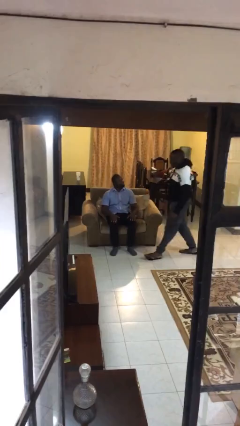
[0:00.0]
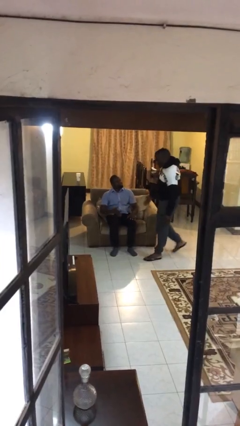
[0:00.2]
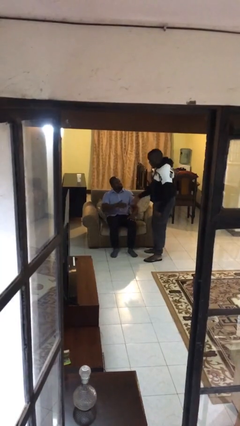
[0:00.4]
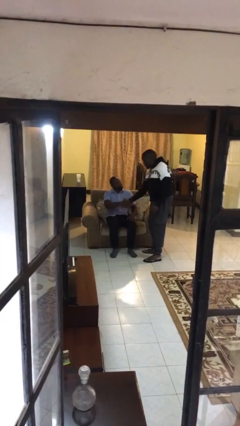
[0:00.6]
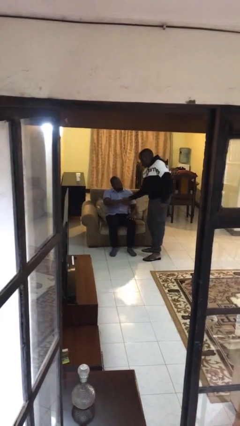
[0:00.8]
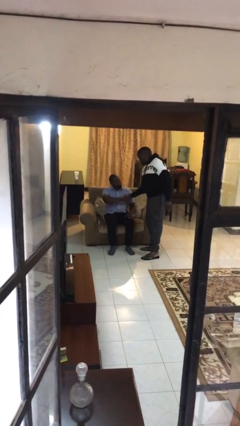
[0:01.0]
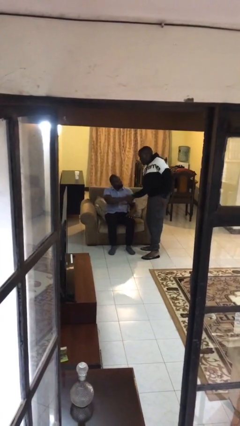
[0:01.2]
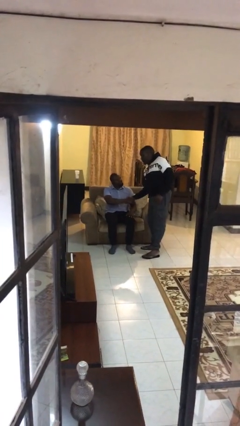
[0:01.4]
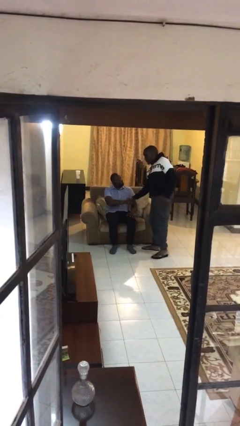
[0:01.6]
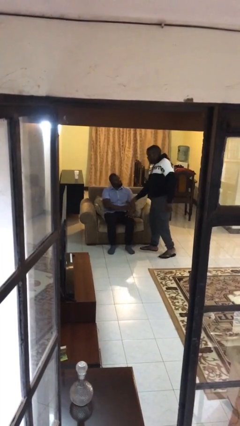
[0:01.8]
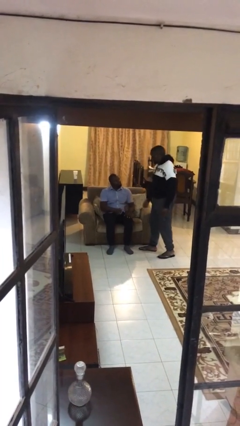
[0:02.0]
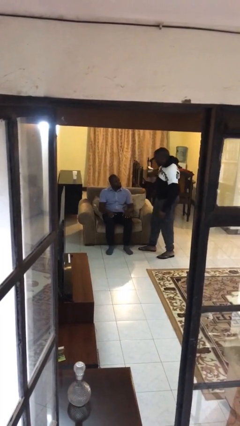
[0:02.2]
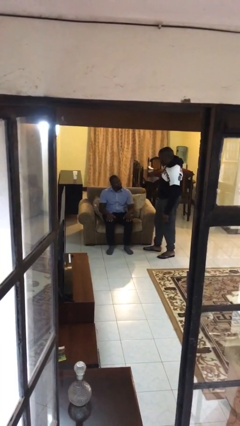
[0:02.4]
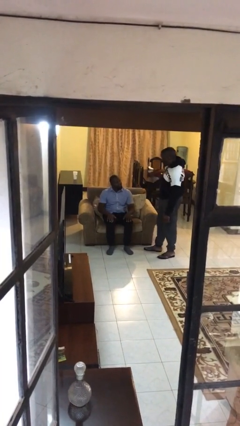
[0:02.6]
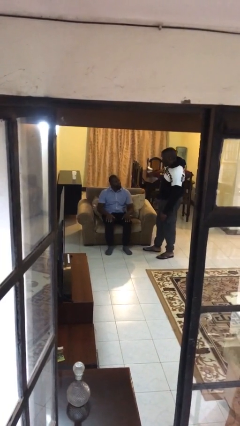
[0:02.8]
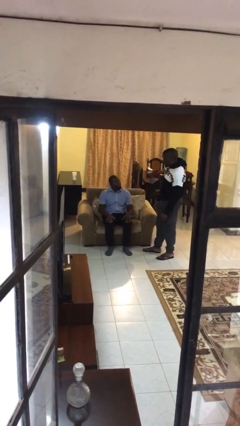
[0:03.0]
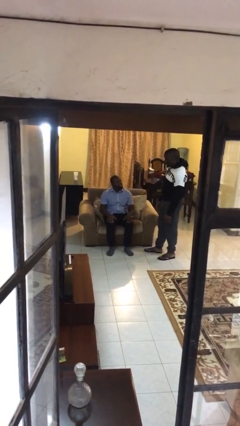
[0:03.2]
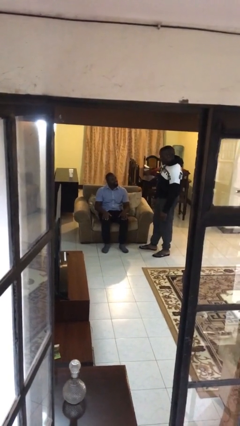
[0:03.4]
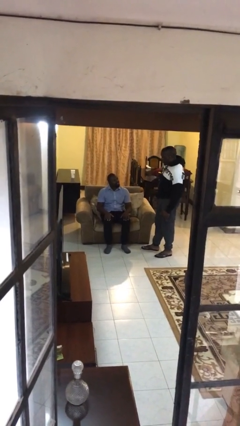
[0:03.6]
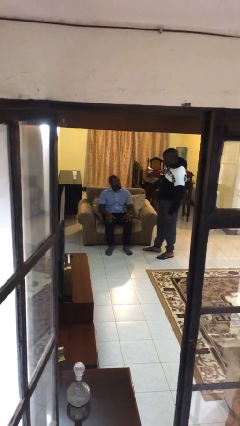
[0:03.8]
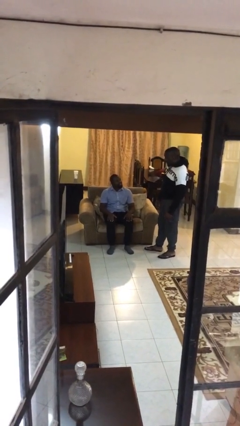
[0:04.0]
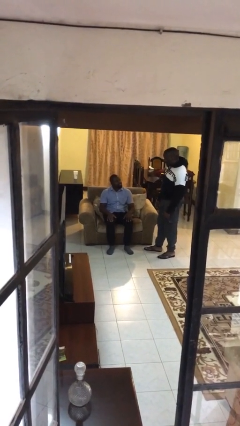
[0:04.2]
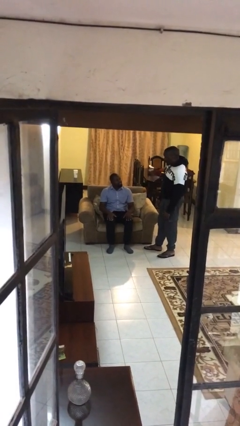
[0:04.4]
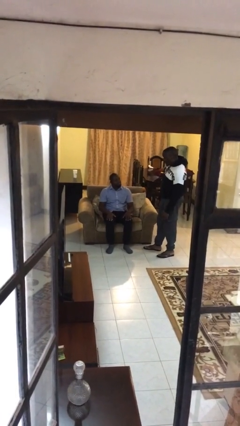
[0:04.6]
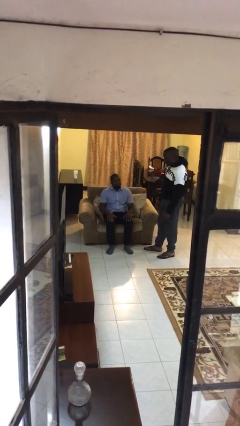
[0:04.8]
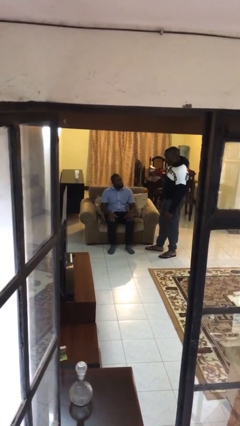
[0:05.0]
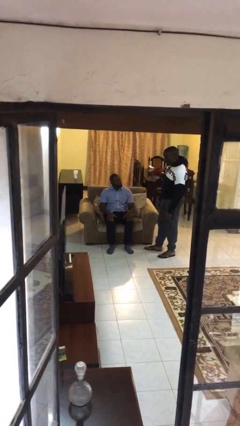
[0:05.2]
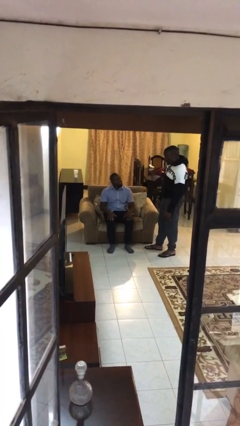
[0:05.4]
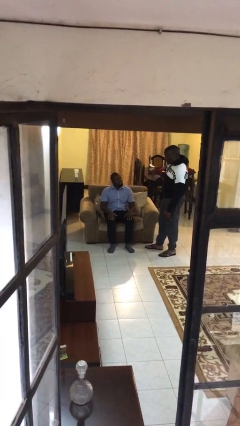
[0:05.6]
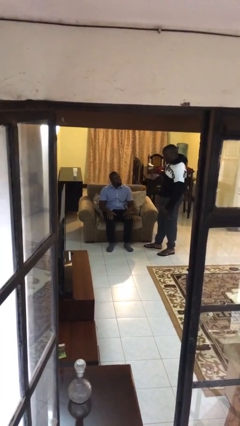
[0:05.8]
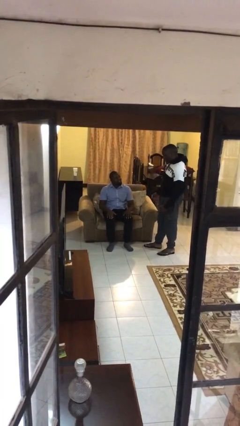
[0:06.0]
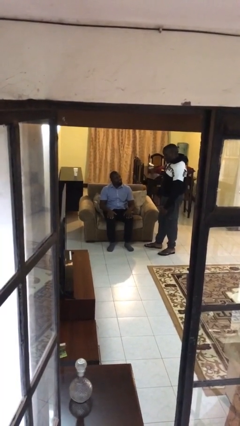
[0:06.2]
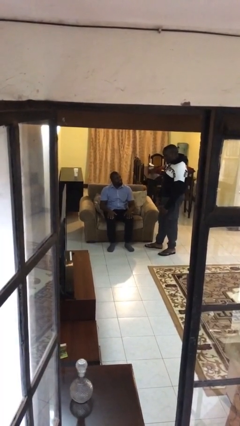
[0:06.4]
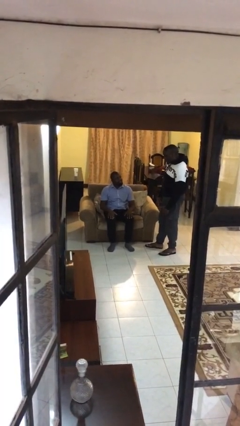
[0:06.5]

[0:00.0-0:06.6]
person shakes hand

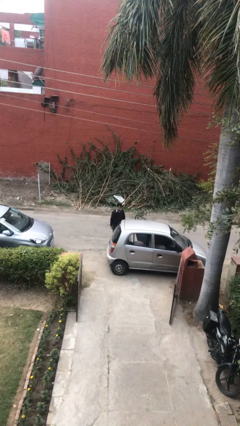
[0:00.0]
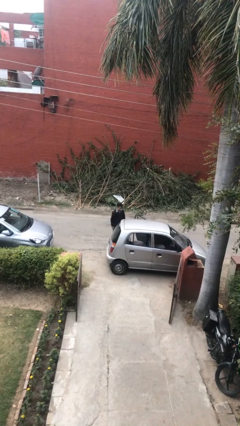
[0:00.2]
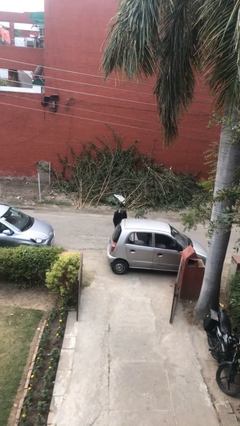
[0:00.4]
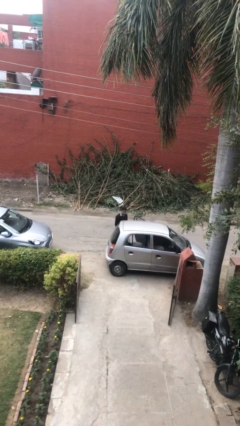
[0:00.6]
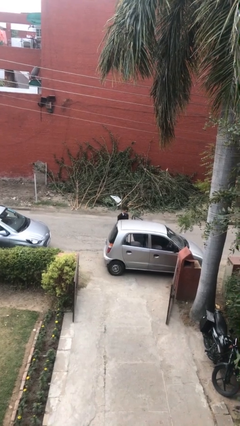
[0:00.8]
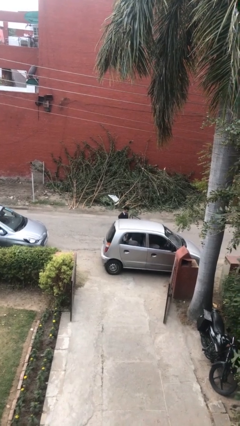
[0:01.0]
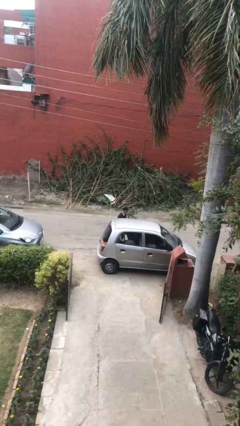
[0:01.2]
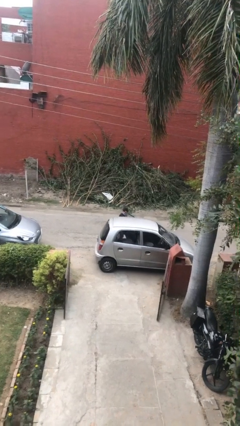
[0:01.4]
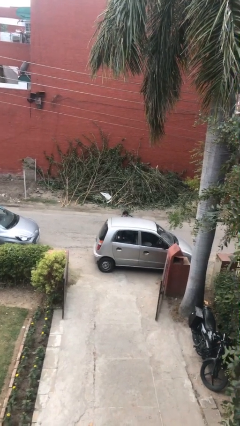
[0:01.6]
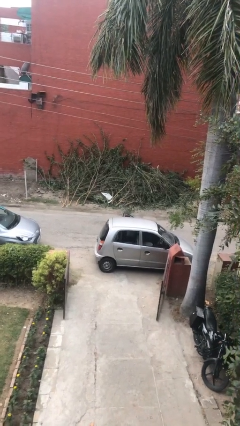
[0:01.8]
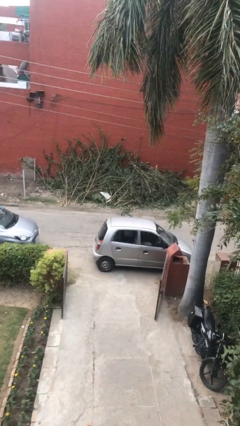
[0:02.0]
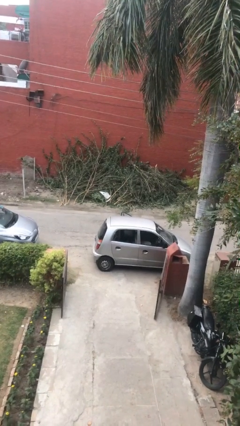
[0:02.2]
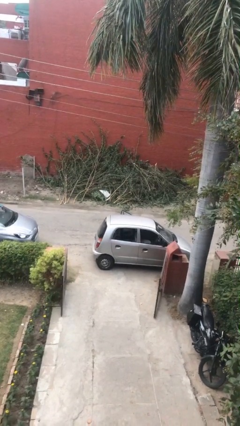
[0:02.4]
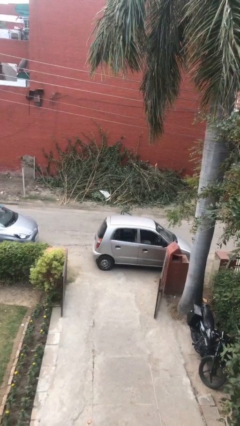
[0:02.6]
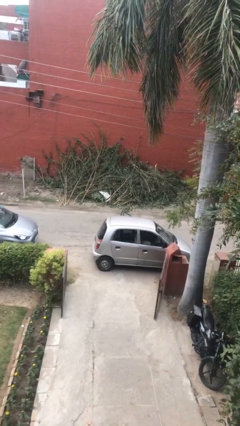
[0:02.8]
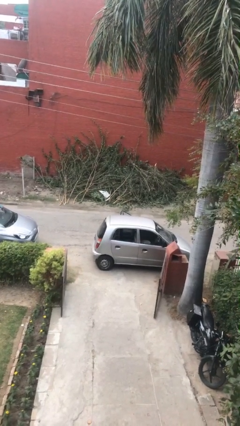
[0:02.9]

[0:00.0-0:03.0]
person enters car

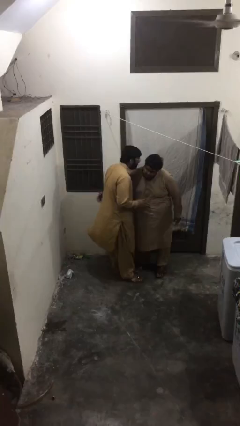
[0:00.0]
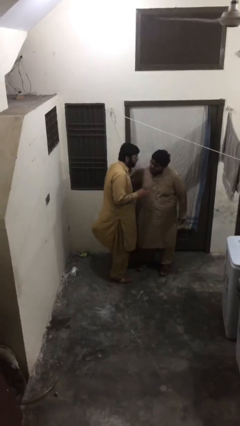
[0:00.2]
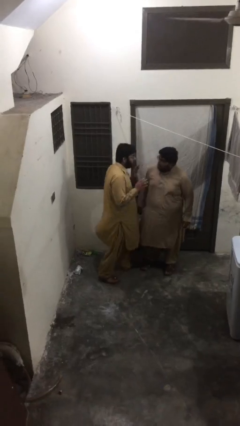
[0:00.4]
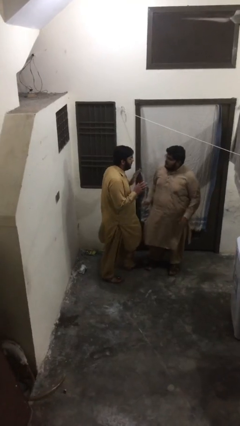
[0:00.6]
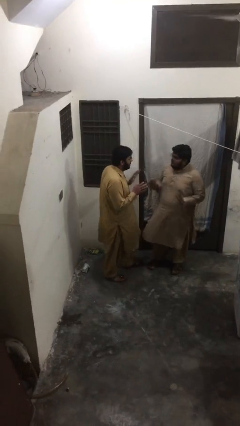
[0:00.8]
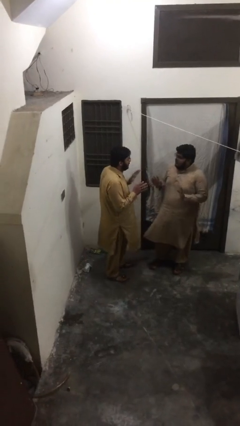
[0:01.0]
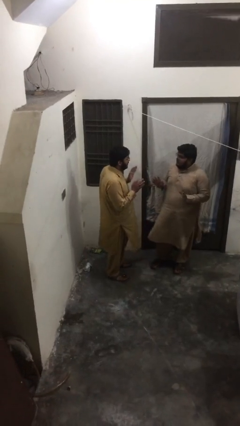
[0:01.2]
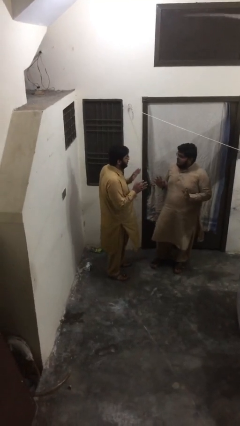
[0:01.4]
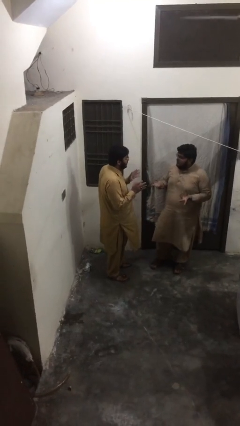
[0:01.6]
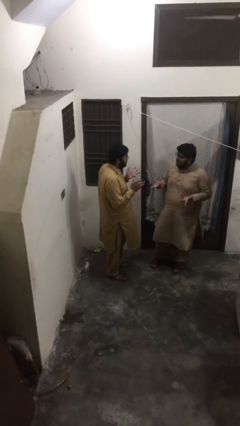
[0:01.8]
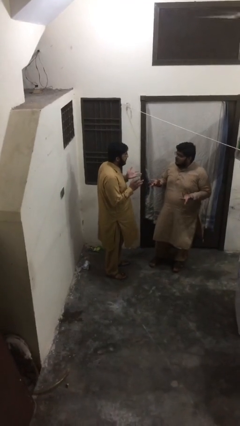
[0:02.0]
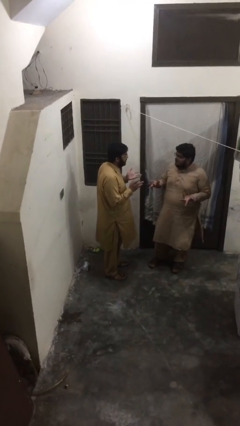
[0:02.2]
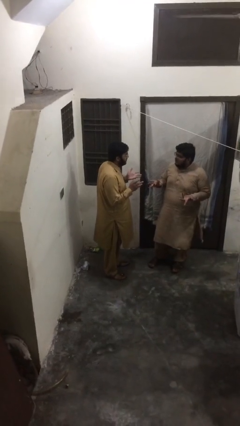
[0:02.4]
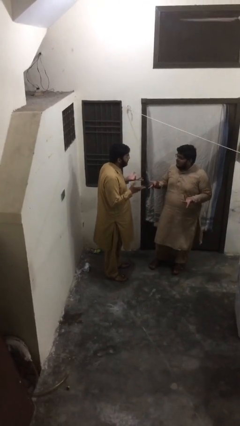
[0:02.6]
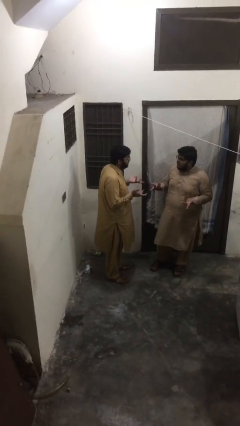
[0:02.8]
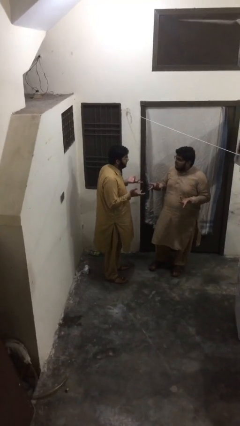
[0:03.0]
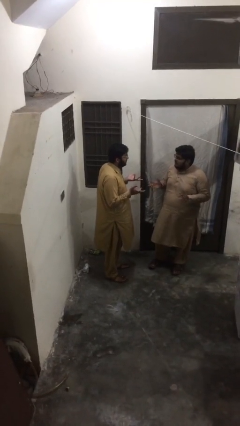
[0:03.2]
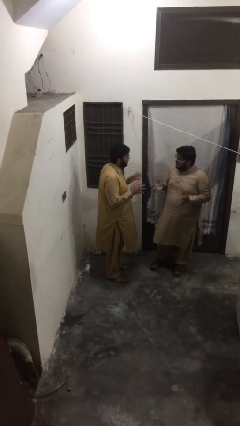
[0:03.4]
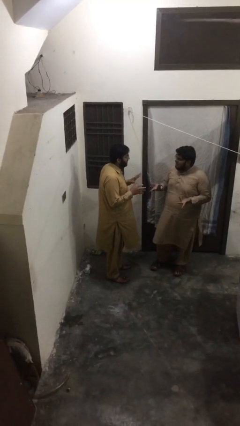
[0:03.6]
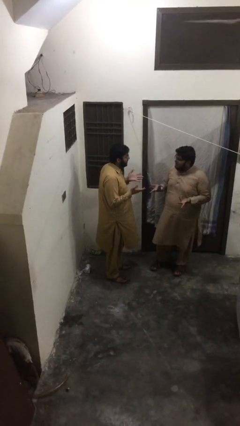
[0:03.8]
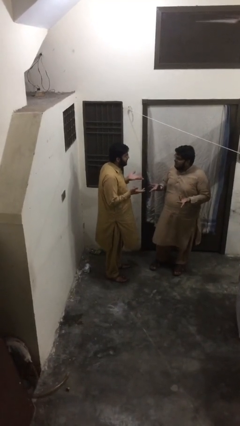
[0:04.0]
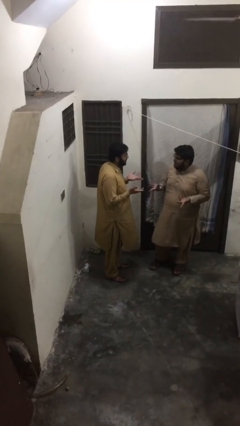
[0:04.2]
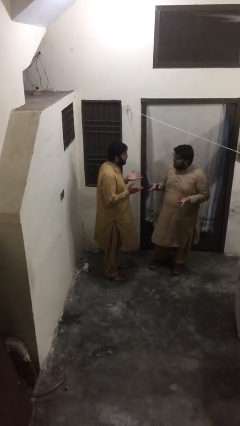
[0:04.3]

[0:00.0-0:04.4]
person talks to person

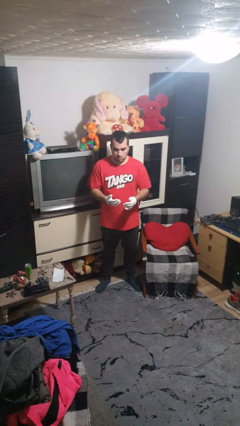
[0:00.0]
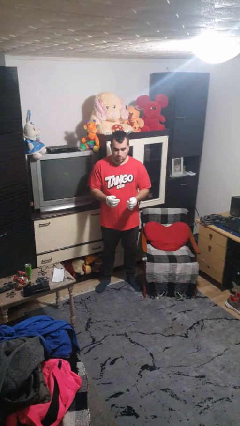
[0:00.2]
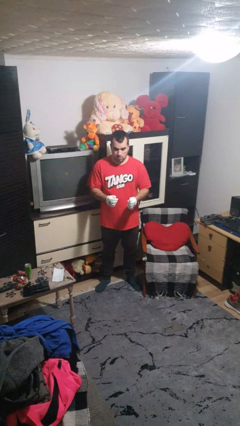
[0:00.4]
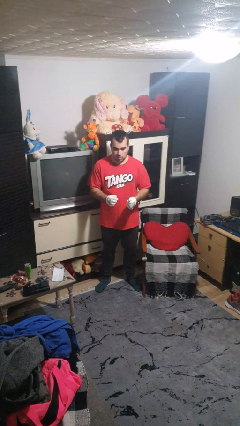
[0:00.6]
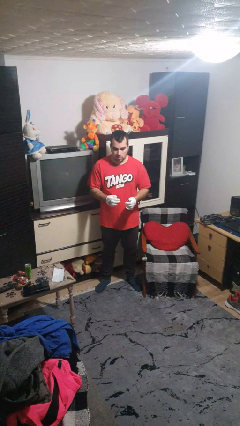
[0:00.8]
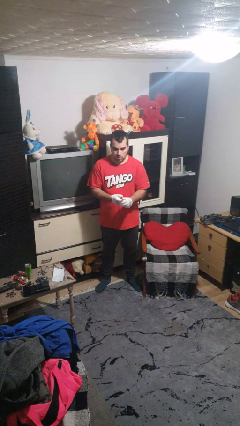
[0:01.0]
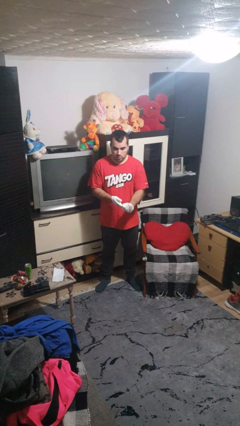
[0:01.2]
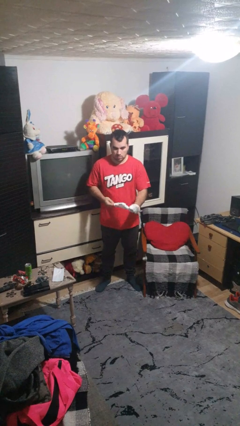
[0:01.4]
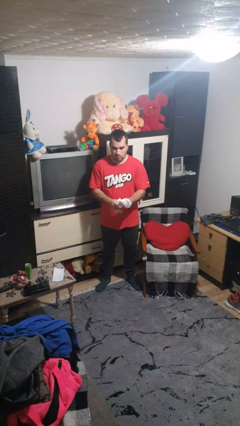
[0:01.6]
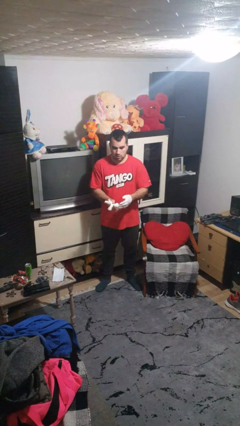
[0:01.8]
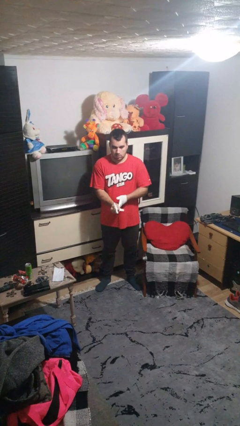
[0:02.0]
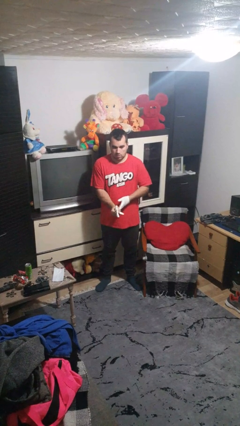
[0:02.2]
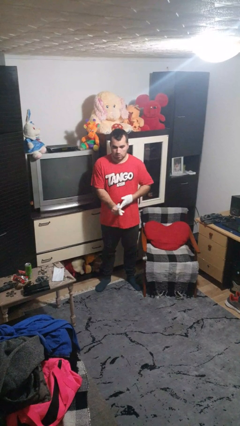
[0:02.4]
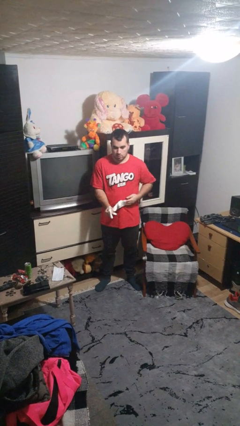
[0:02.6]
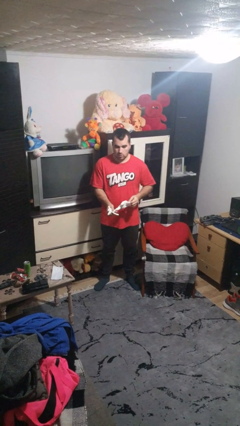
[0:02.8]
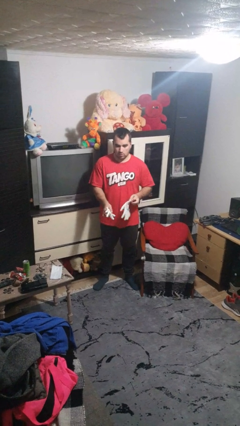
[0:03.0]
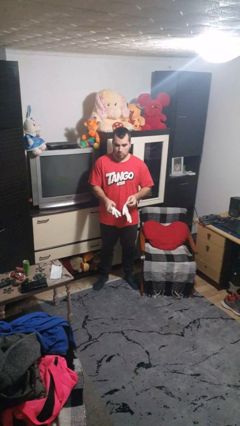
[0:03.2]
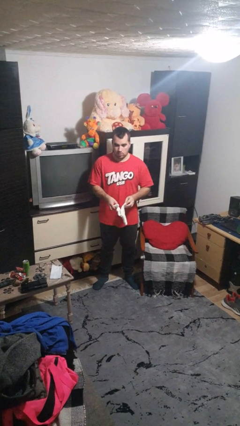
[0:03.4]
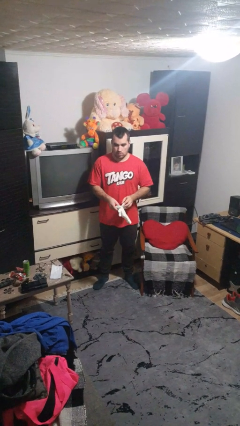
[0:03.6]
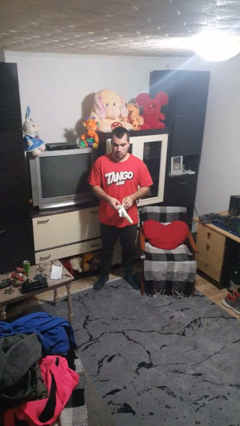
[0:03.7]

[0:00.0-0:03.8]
person takes off gloves
